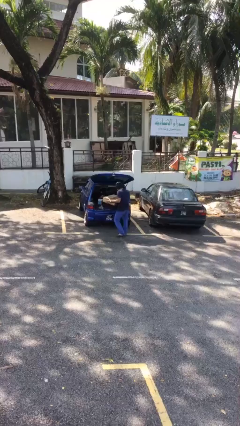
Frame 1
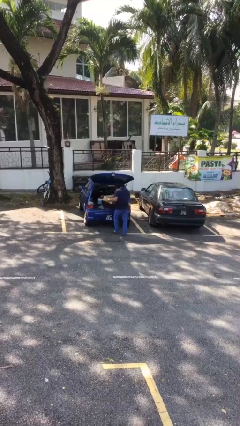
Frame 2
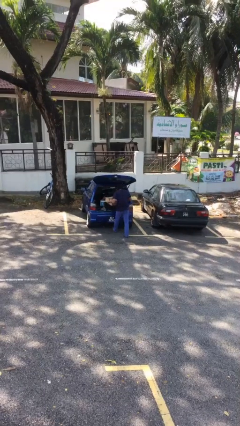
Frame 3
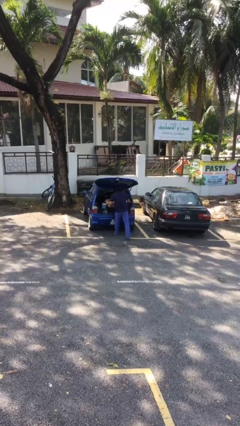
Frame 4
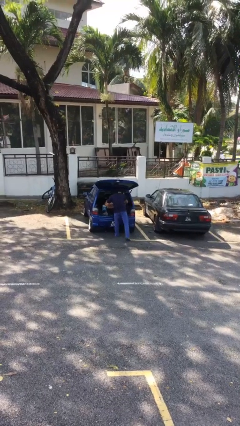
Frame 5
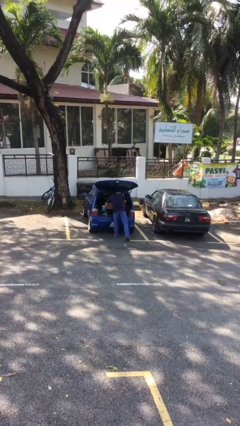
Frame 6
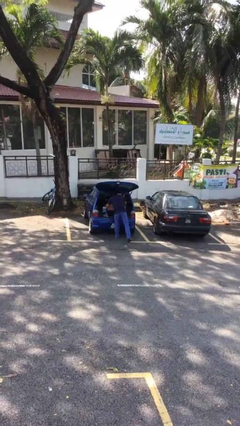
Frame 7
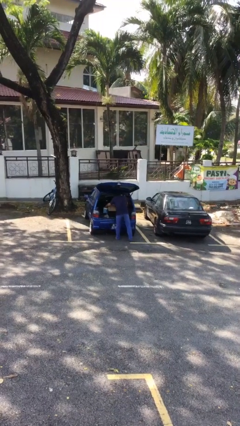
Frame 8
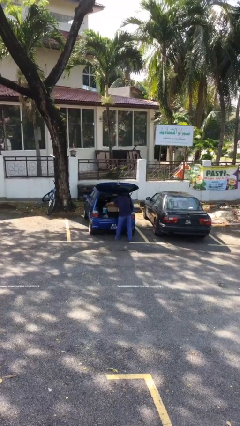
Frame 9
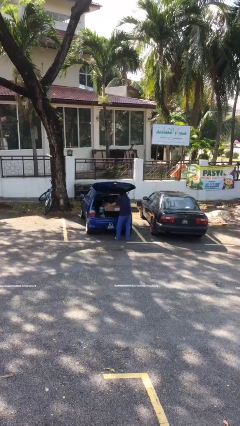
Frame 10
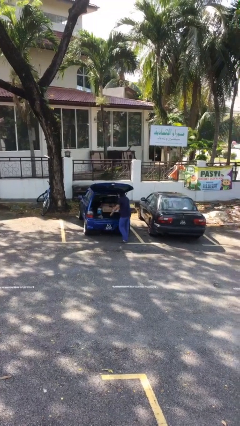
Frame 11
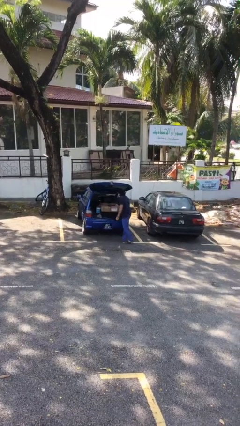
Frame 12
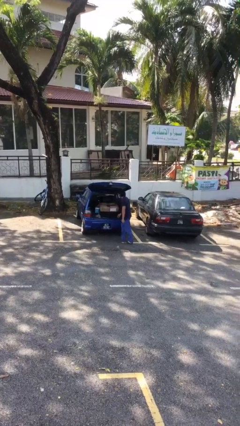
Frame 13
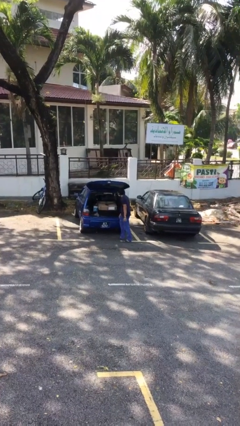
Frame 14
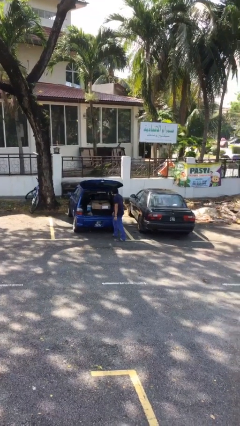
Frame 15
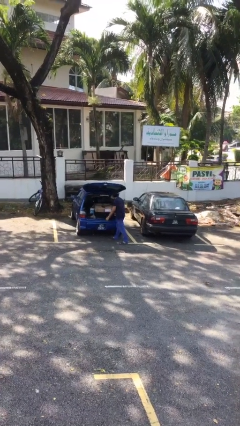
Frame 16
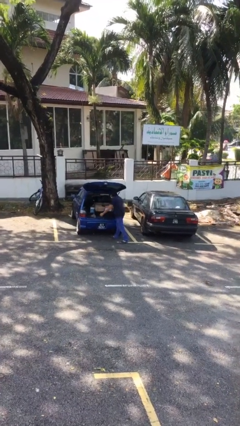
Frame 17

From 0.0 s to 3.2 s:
person loads car

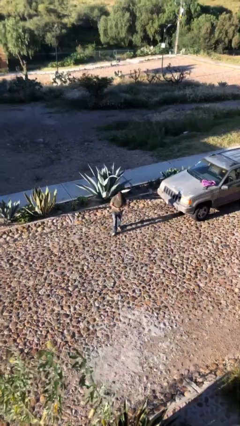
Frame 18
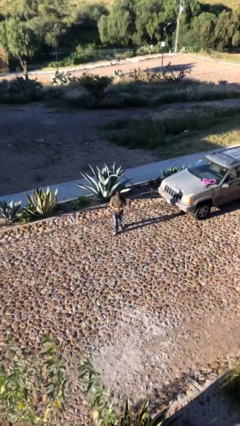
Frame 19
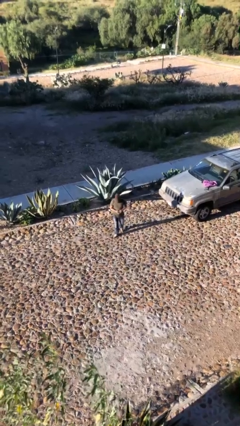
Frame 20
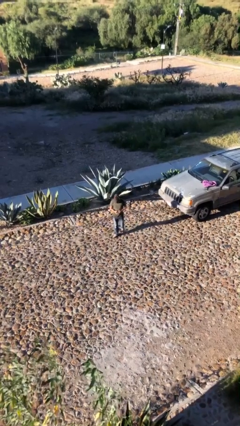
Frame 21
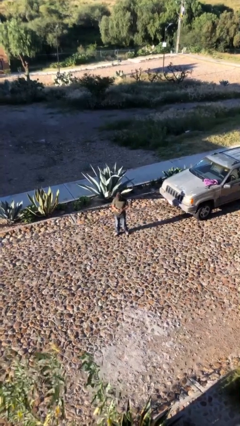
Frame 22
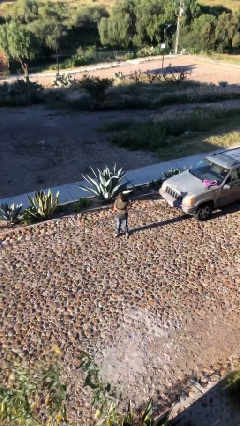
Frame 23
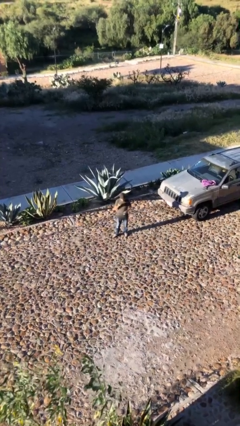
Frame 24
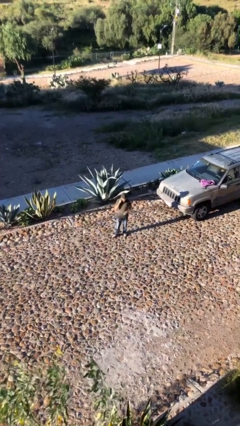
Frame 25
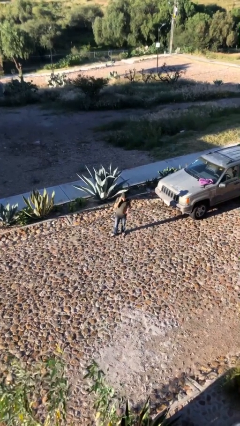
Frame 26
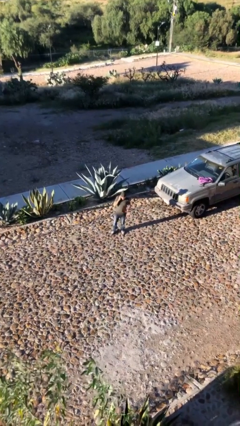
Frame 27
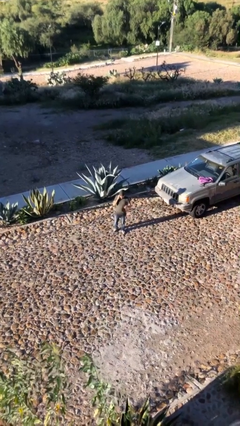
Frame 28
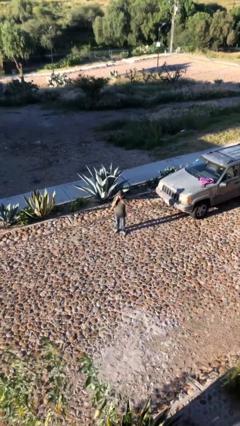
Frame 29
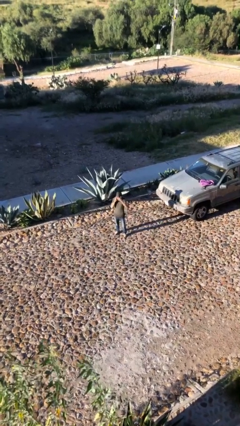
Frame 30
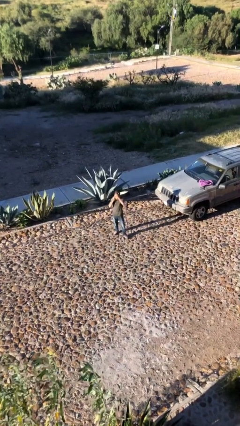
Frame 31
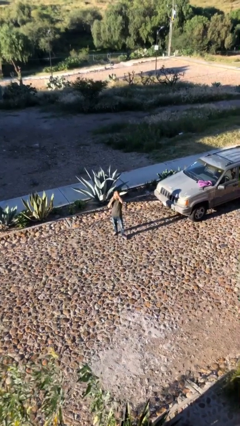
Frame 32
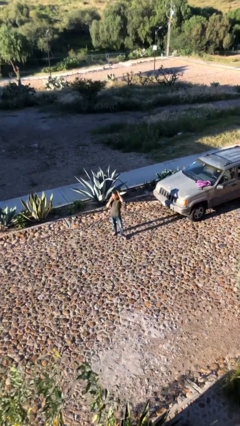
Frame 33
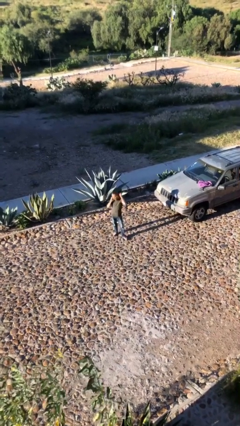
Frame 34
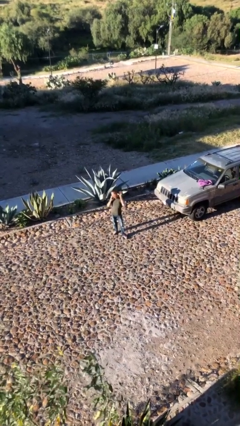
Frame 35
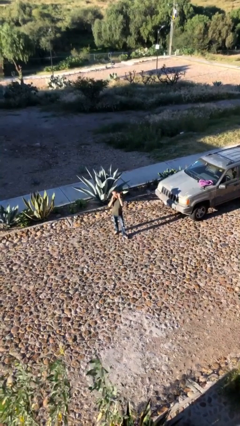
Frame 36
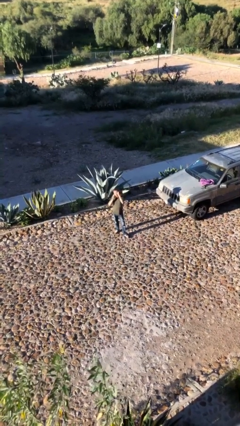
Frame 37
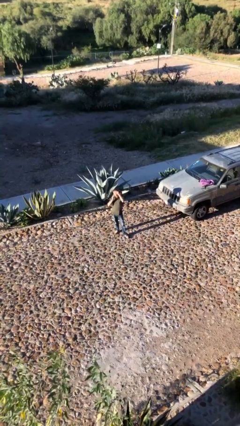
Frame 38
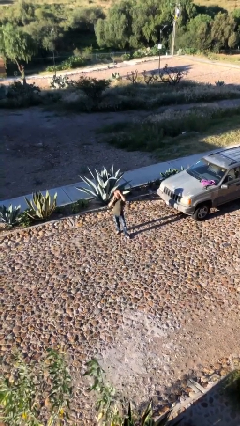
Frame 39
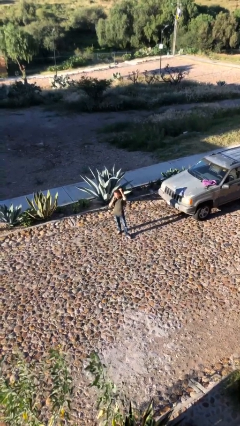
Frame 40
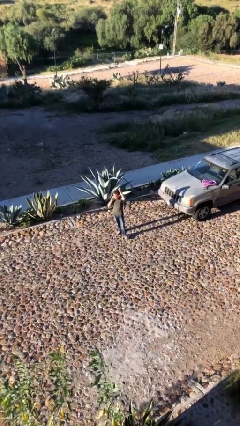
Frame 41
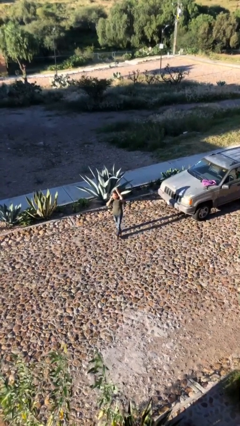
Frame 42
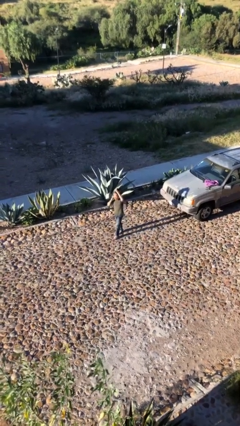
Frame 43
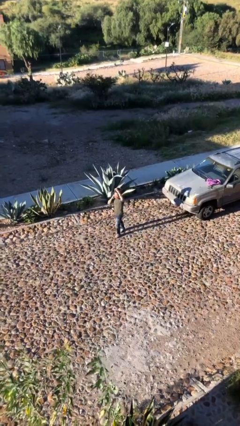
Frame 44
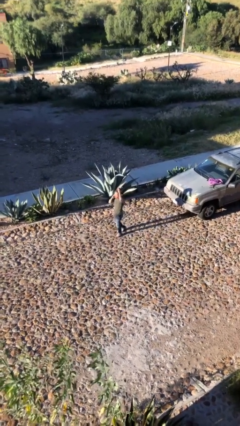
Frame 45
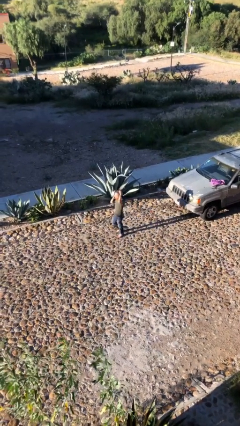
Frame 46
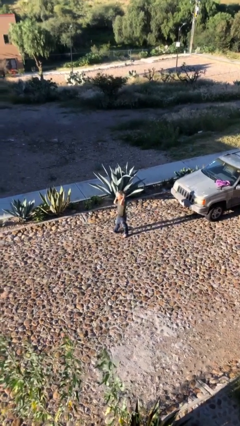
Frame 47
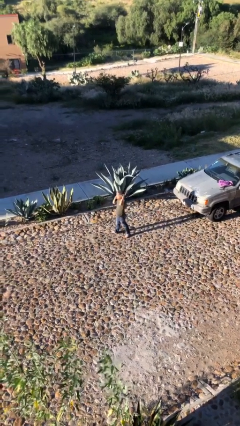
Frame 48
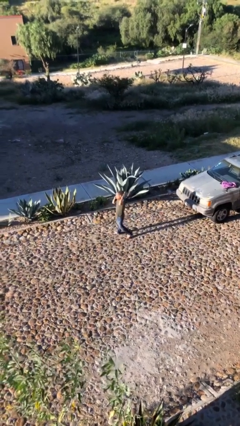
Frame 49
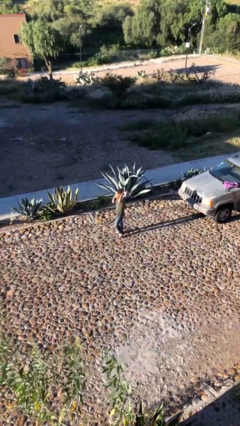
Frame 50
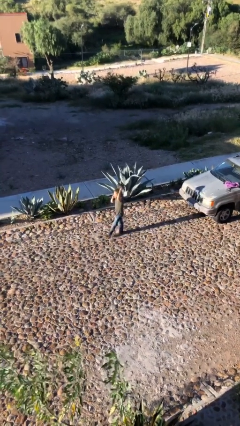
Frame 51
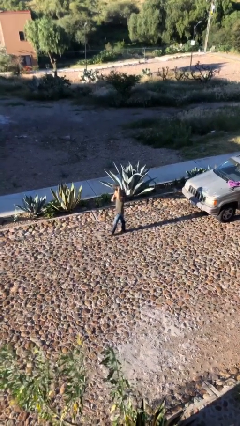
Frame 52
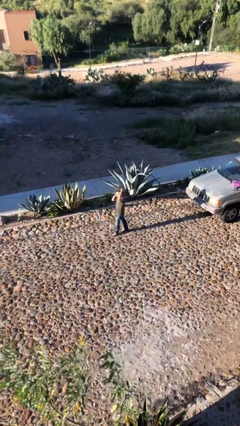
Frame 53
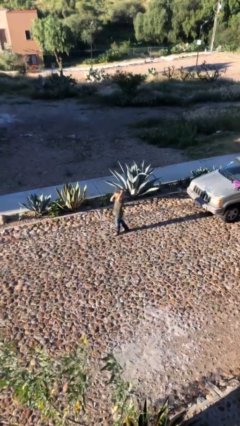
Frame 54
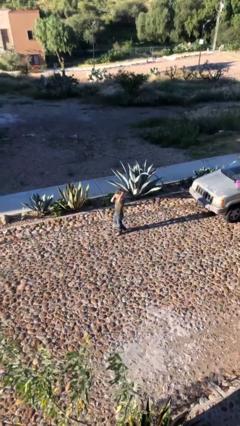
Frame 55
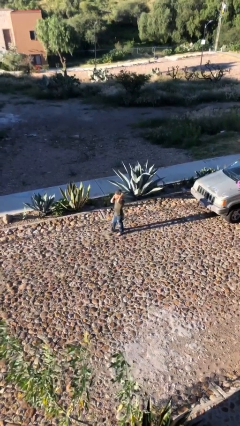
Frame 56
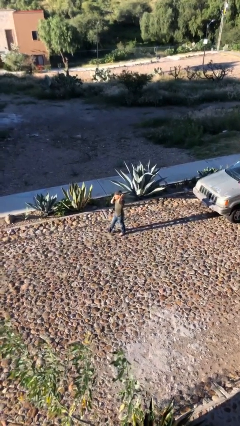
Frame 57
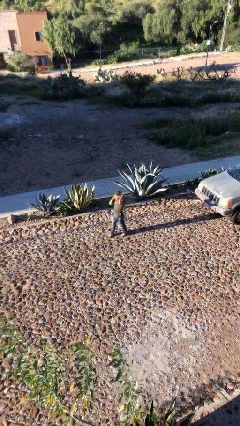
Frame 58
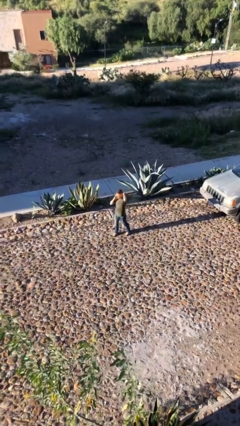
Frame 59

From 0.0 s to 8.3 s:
person talks on phone

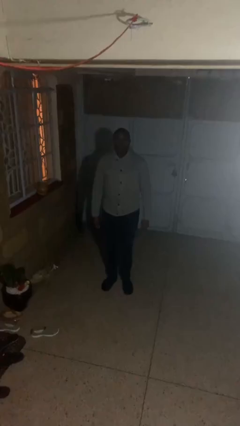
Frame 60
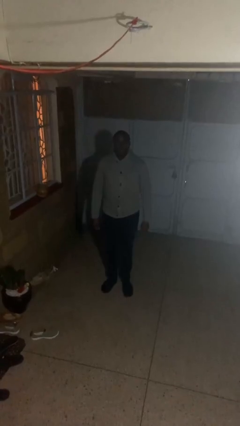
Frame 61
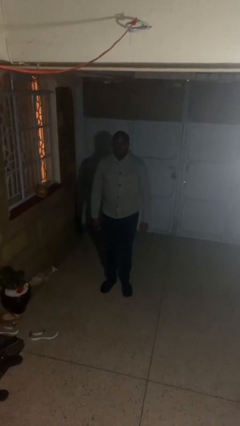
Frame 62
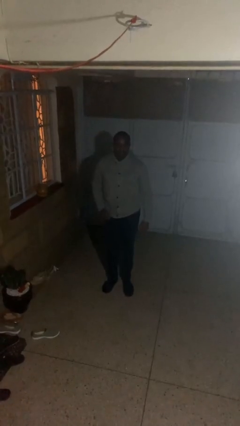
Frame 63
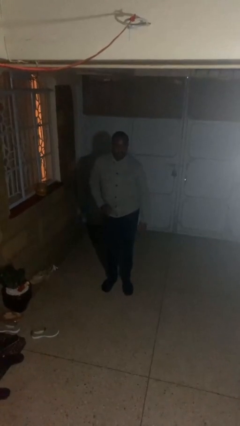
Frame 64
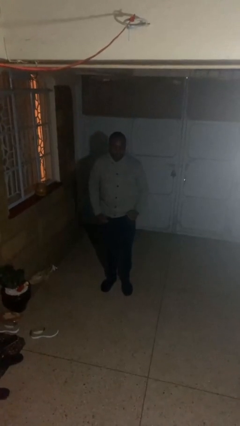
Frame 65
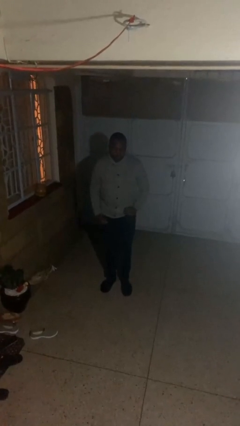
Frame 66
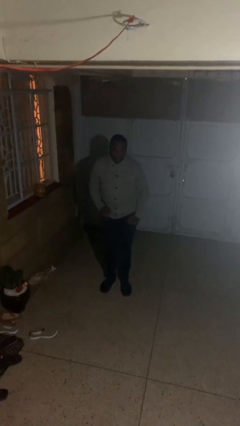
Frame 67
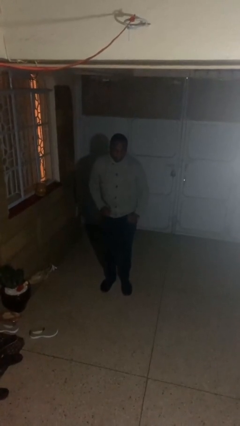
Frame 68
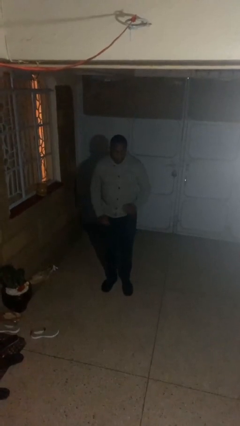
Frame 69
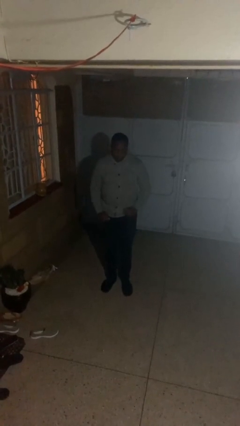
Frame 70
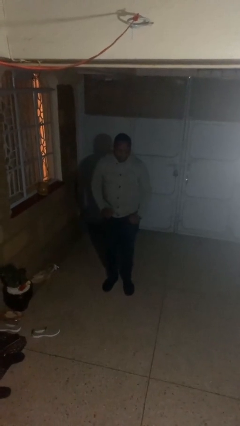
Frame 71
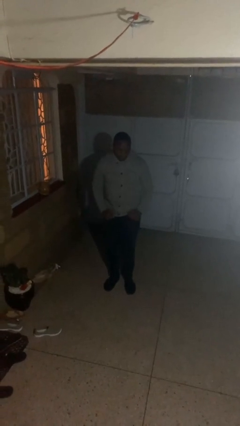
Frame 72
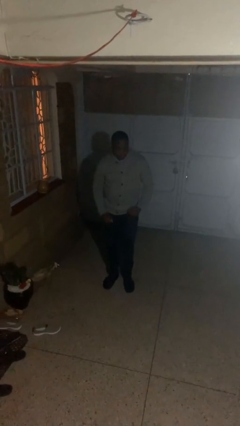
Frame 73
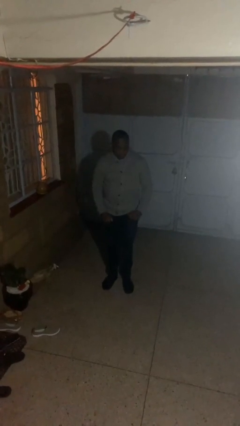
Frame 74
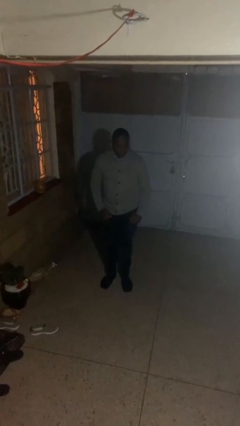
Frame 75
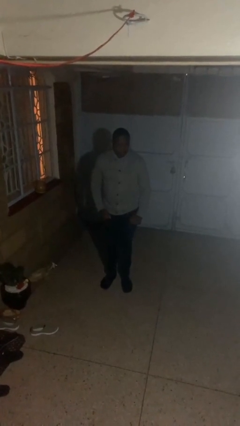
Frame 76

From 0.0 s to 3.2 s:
person dances in place

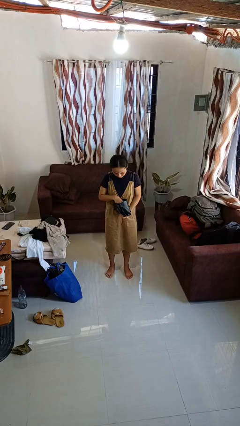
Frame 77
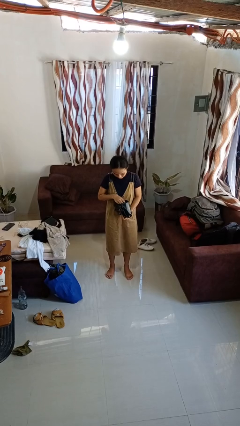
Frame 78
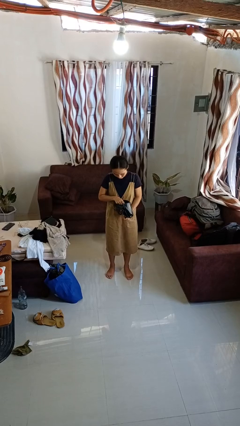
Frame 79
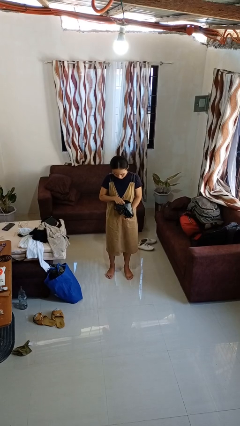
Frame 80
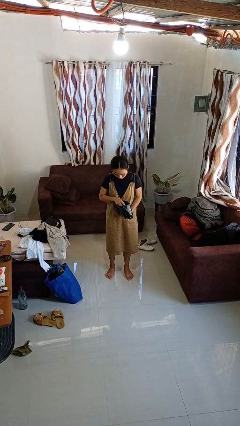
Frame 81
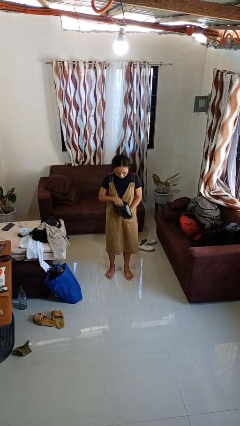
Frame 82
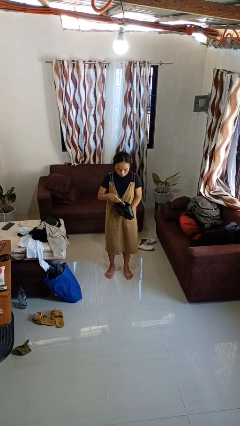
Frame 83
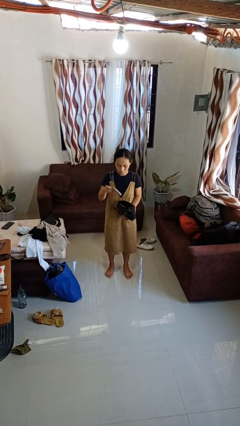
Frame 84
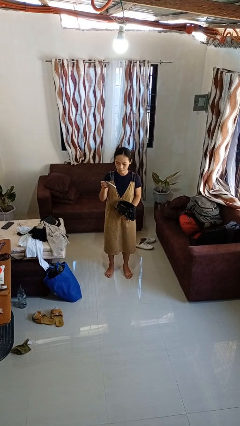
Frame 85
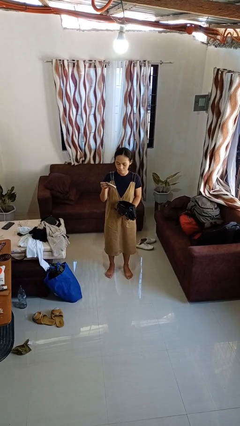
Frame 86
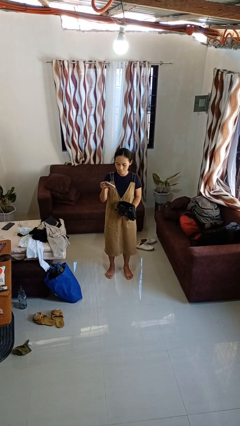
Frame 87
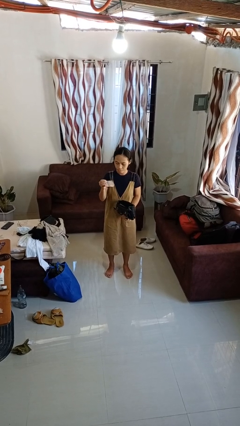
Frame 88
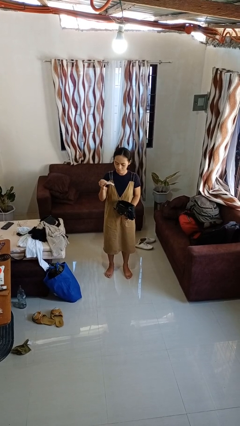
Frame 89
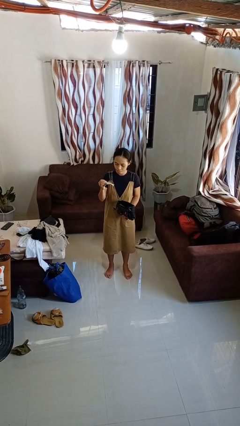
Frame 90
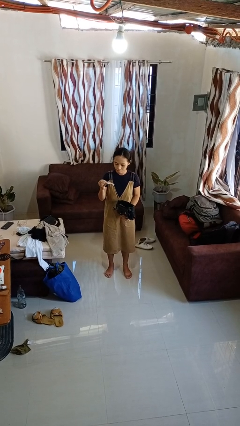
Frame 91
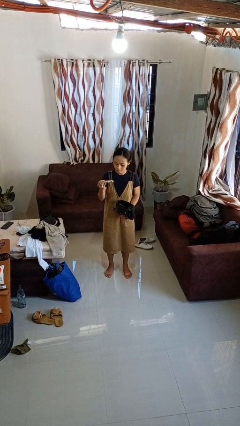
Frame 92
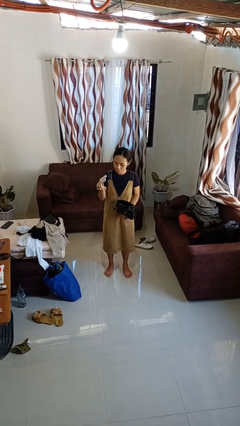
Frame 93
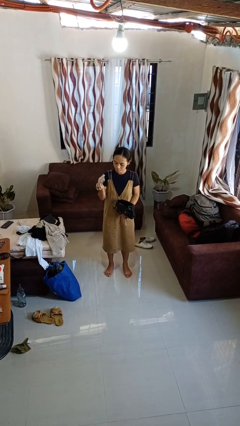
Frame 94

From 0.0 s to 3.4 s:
person takes object from purse
